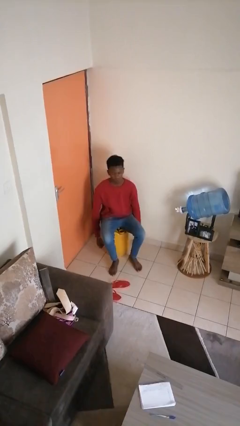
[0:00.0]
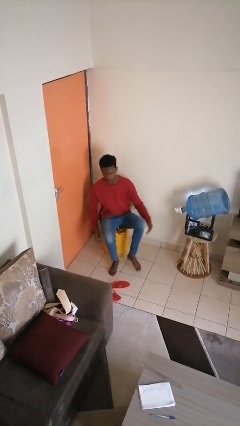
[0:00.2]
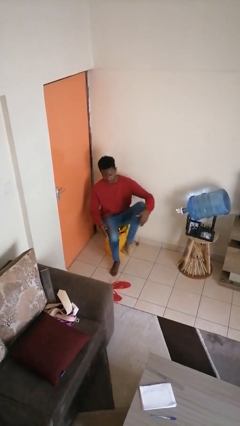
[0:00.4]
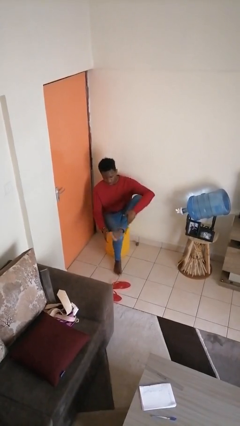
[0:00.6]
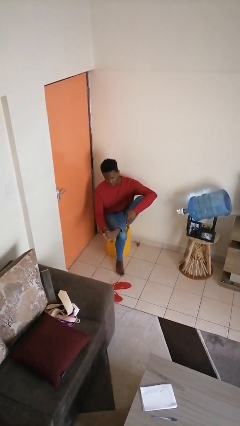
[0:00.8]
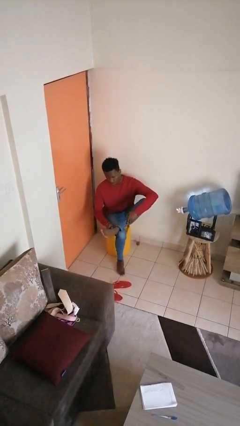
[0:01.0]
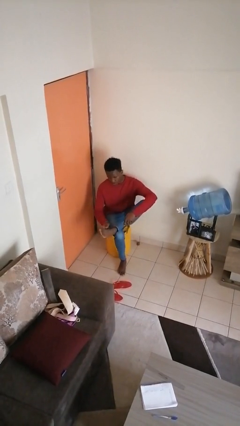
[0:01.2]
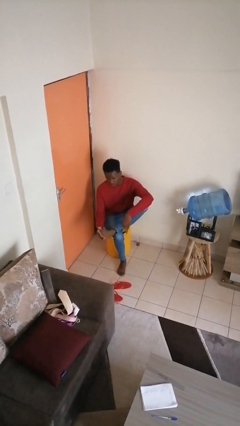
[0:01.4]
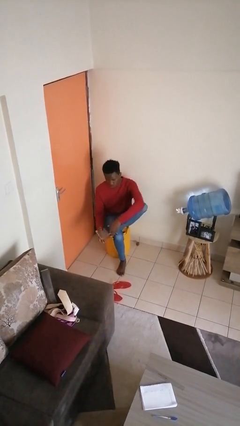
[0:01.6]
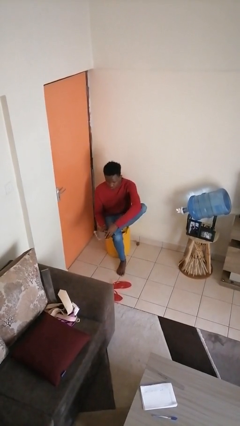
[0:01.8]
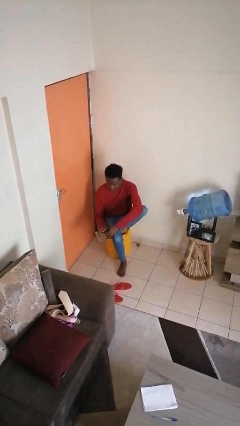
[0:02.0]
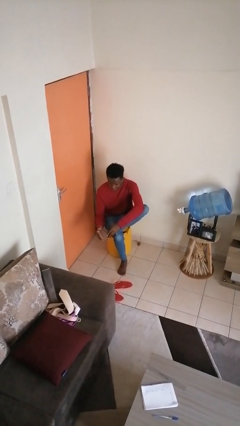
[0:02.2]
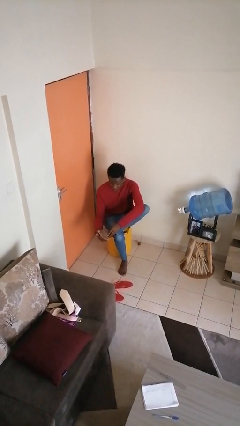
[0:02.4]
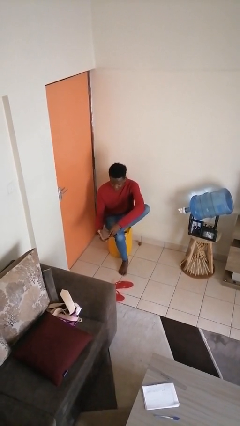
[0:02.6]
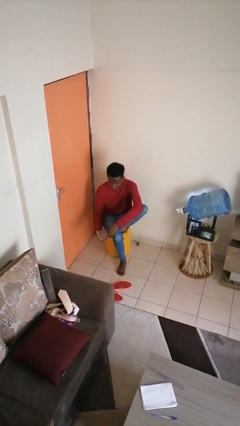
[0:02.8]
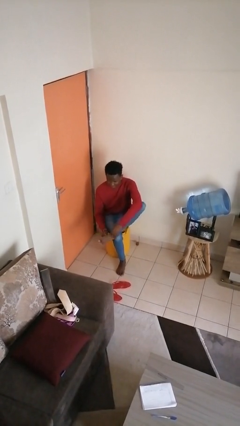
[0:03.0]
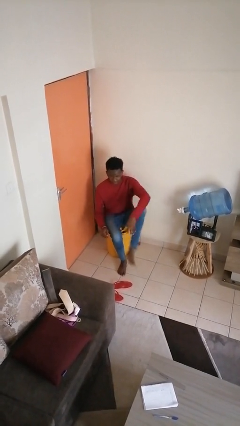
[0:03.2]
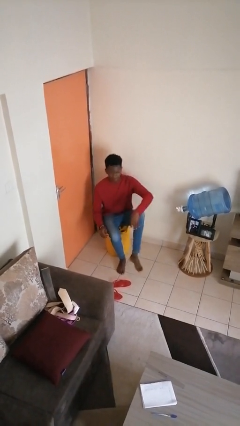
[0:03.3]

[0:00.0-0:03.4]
person rubs foot

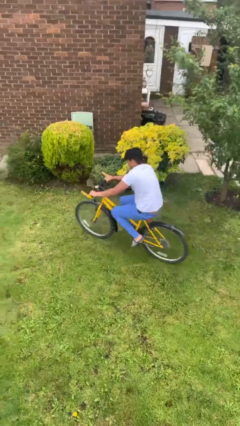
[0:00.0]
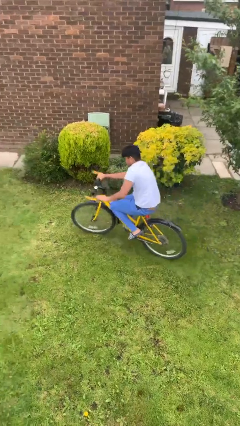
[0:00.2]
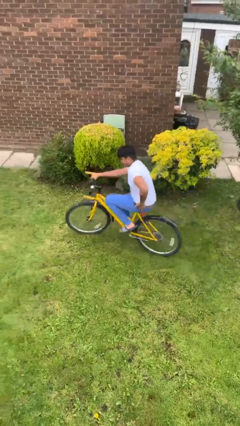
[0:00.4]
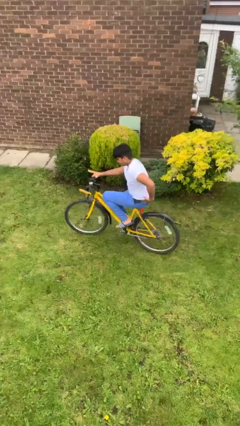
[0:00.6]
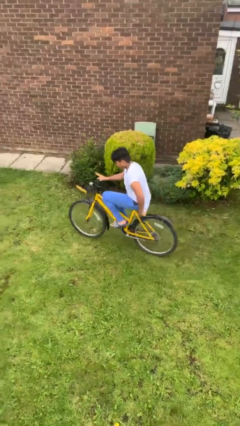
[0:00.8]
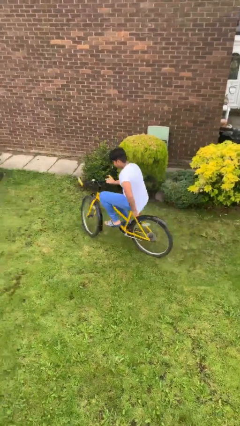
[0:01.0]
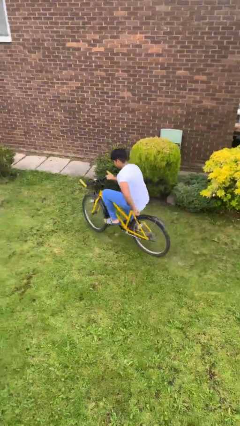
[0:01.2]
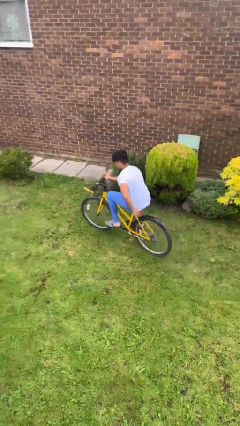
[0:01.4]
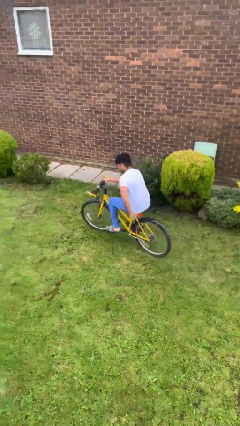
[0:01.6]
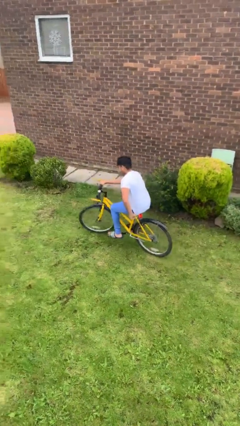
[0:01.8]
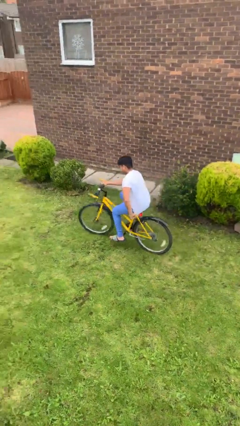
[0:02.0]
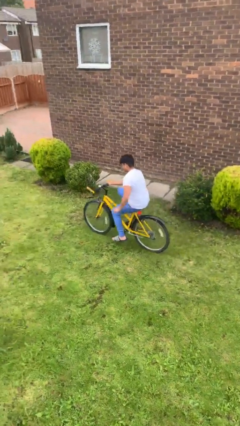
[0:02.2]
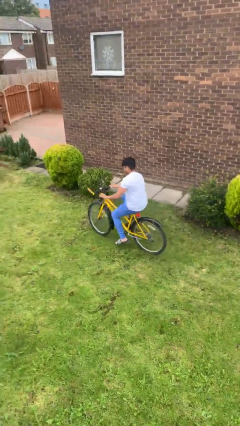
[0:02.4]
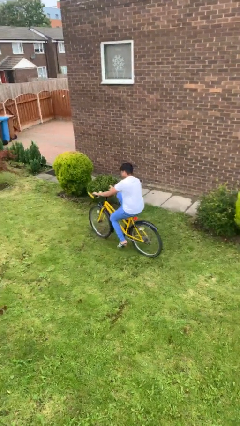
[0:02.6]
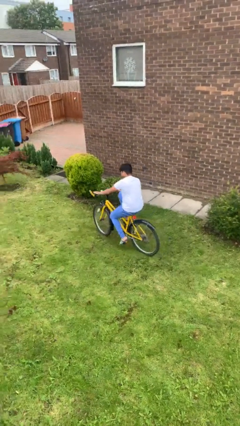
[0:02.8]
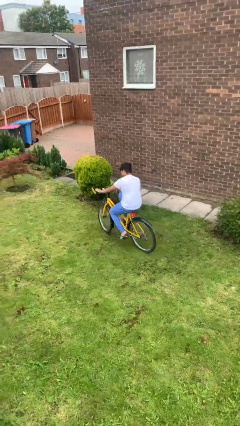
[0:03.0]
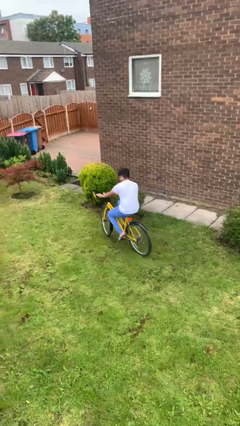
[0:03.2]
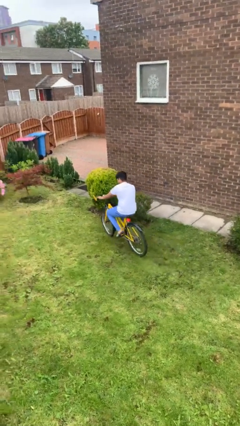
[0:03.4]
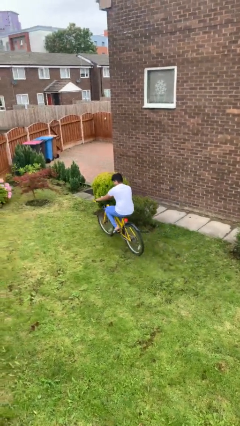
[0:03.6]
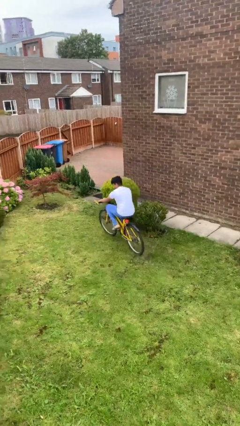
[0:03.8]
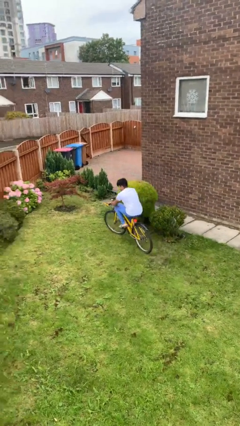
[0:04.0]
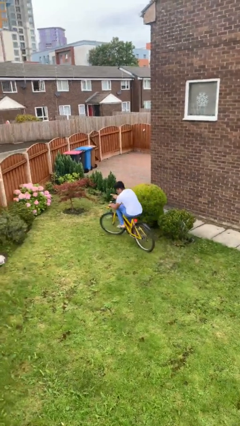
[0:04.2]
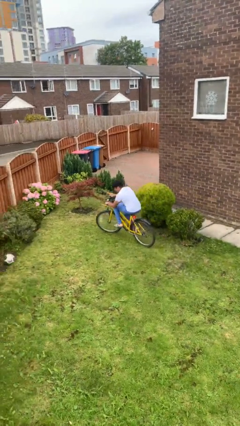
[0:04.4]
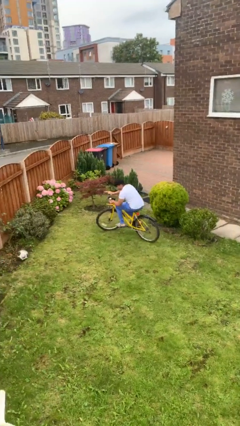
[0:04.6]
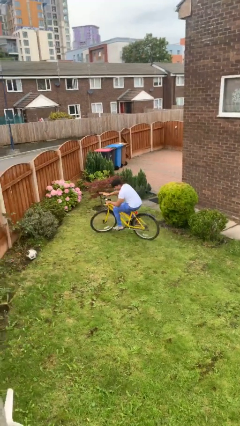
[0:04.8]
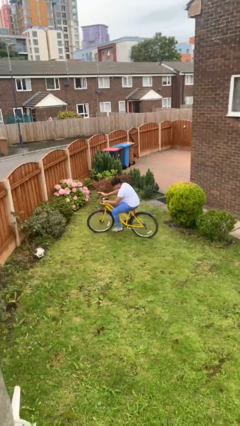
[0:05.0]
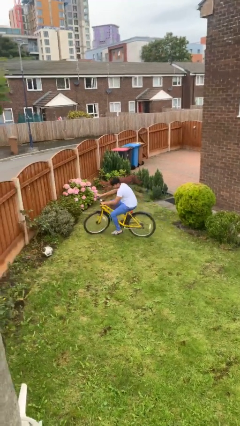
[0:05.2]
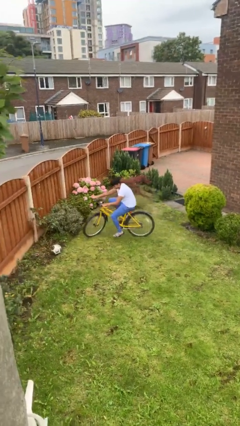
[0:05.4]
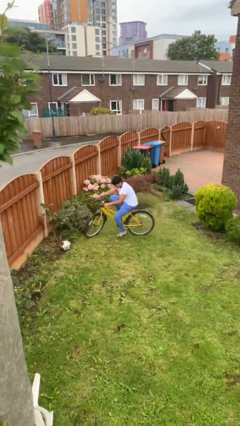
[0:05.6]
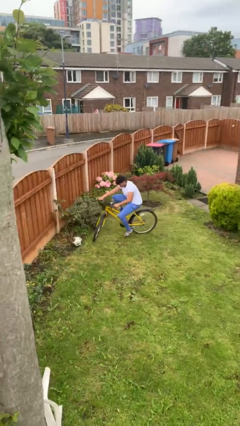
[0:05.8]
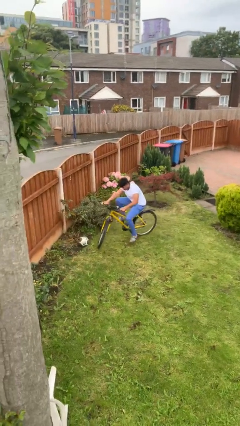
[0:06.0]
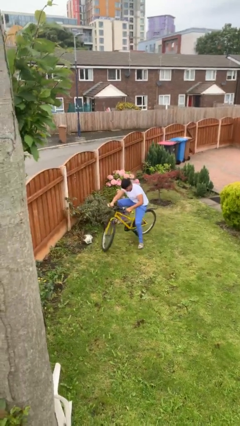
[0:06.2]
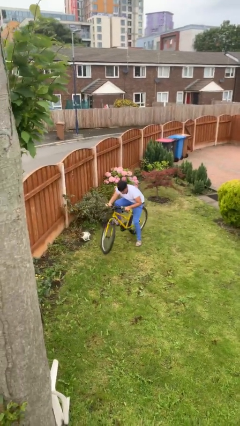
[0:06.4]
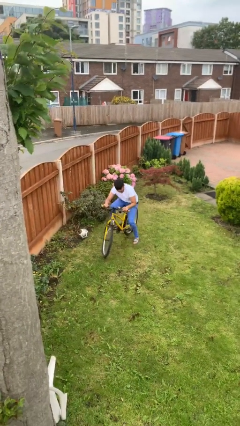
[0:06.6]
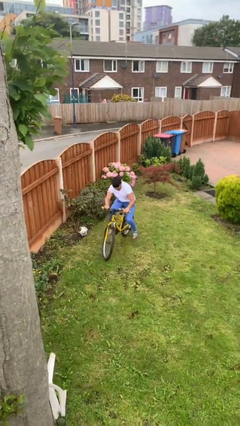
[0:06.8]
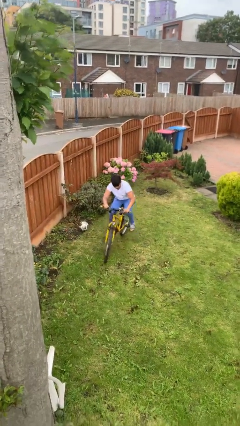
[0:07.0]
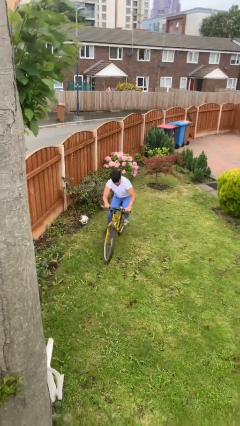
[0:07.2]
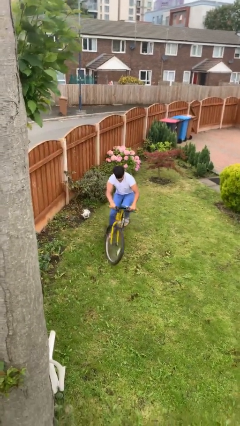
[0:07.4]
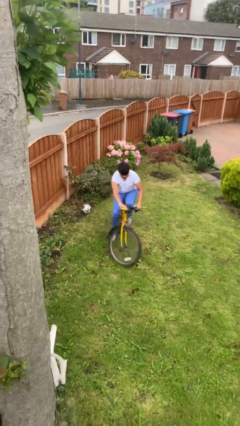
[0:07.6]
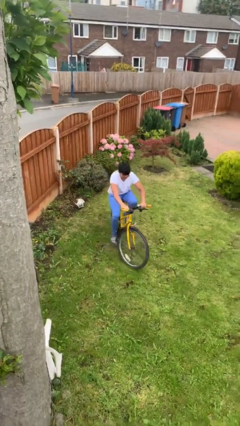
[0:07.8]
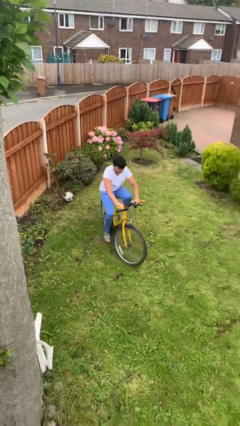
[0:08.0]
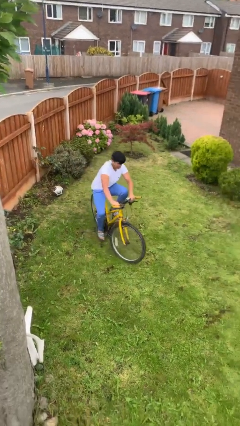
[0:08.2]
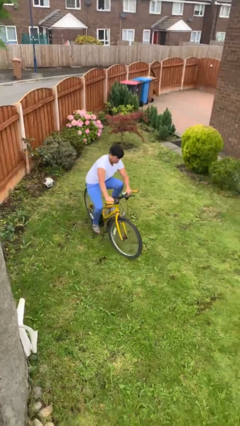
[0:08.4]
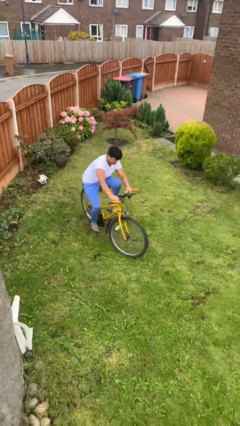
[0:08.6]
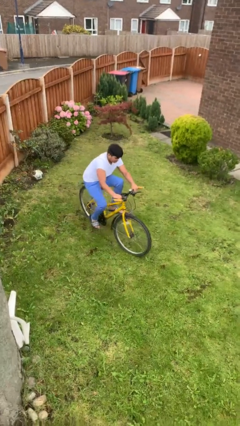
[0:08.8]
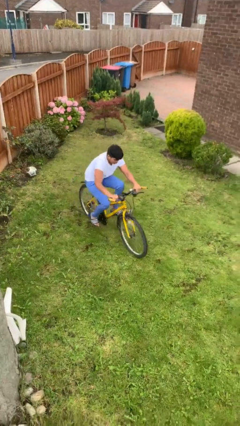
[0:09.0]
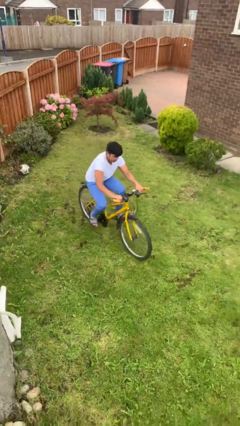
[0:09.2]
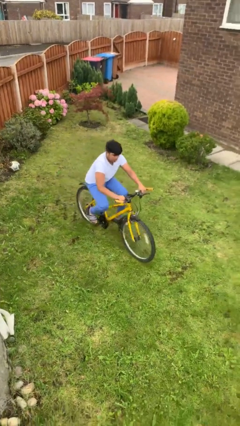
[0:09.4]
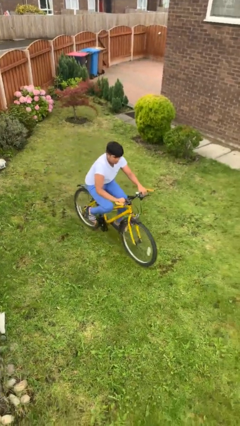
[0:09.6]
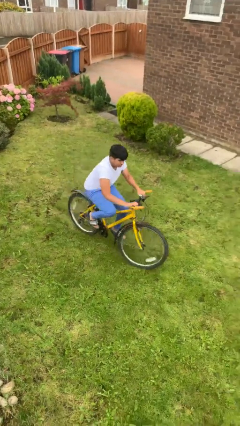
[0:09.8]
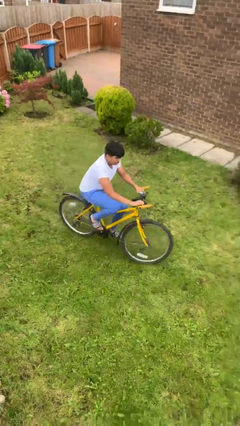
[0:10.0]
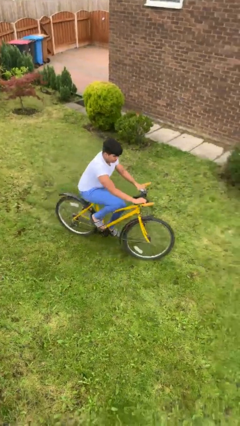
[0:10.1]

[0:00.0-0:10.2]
person rides bicycle

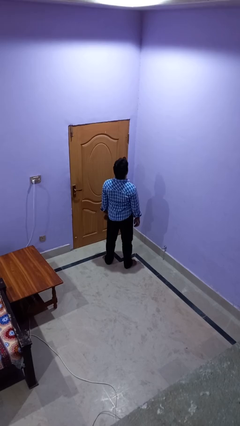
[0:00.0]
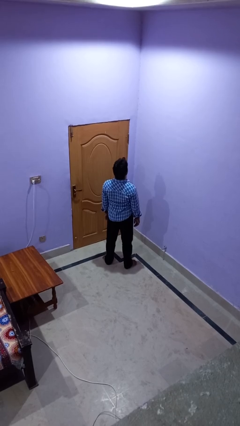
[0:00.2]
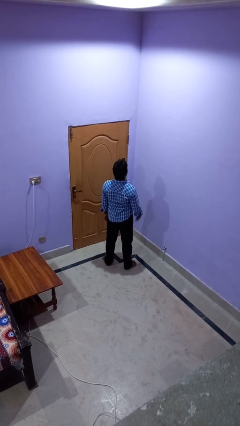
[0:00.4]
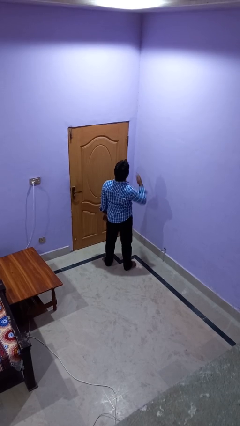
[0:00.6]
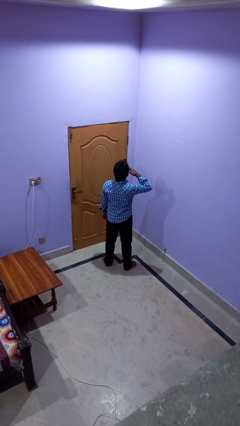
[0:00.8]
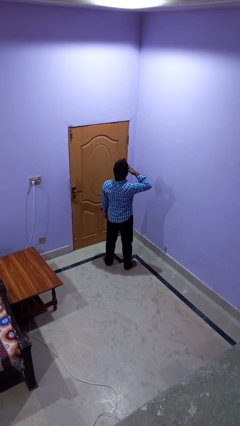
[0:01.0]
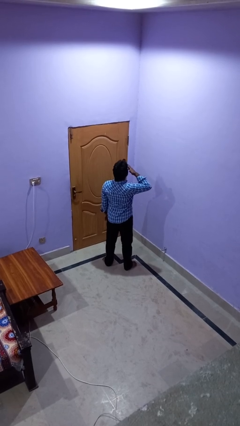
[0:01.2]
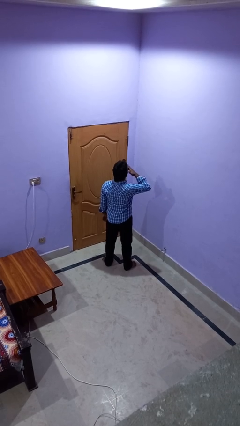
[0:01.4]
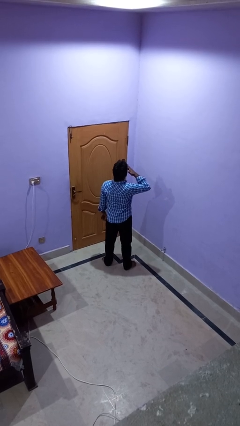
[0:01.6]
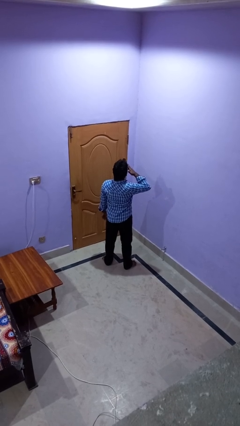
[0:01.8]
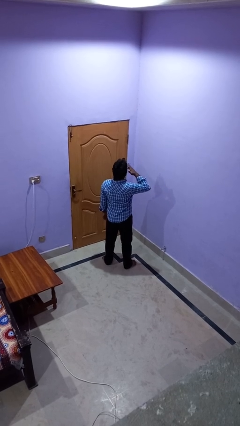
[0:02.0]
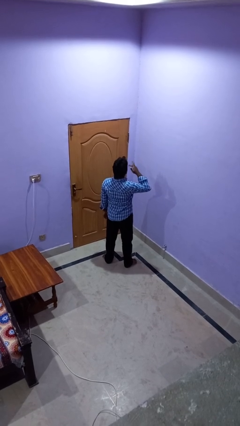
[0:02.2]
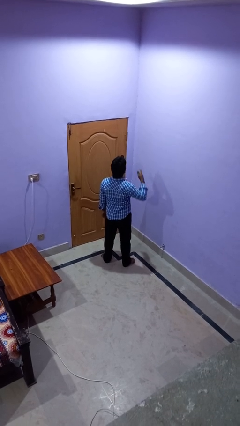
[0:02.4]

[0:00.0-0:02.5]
person rubs eyes

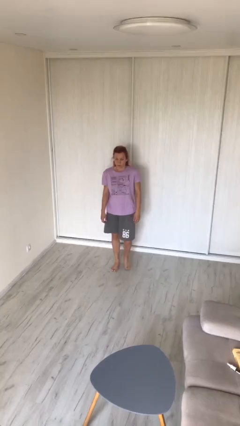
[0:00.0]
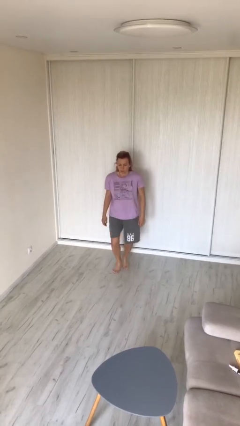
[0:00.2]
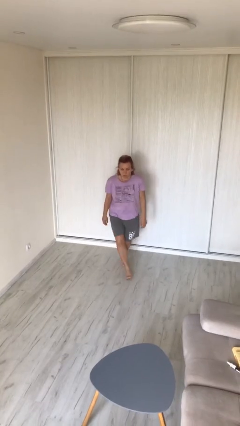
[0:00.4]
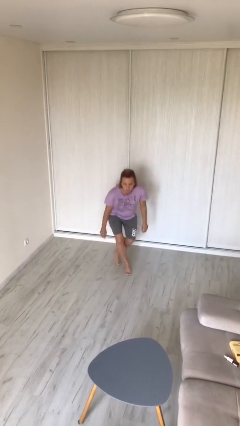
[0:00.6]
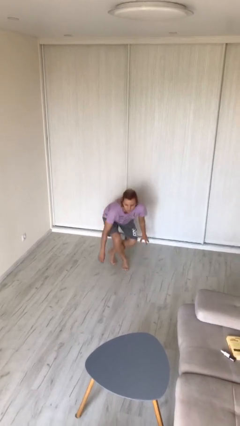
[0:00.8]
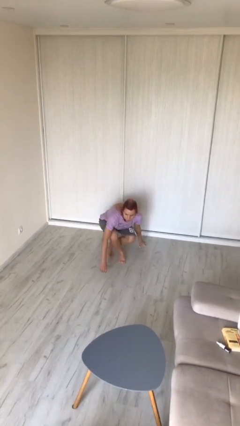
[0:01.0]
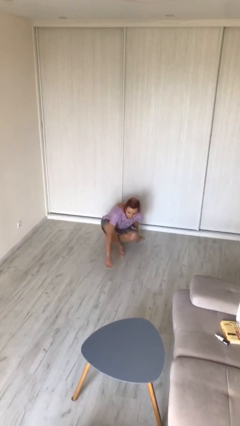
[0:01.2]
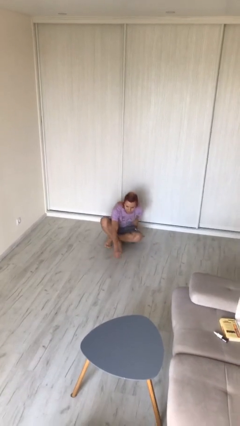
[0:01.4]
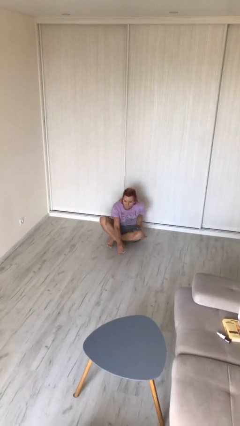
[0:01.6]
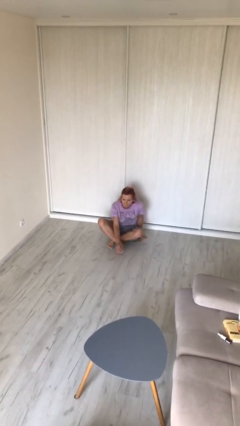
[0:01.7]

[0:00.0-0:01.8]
person sits crisscross
